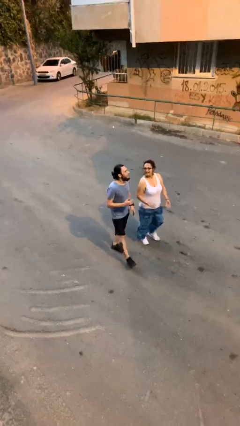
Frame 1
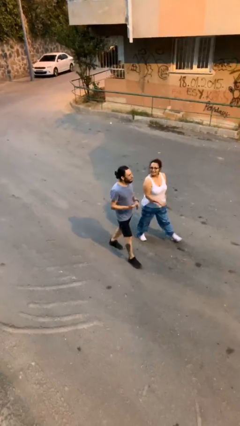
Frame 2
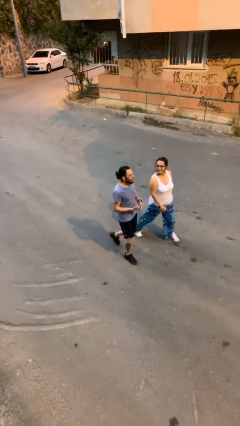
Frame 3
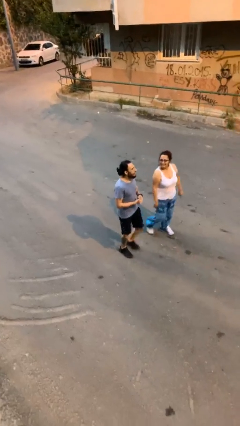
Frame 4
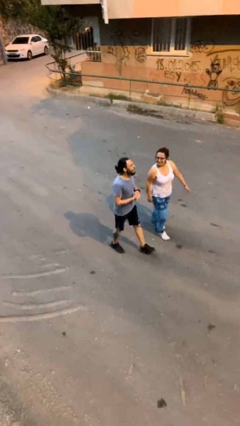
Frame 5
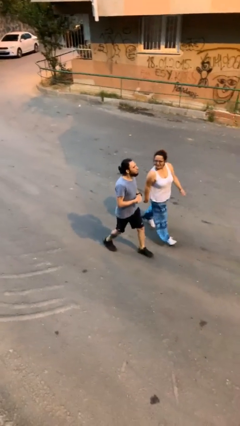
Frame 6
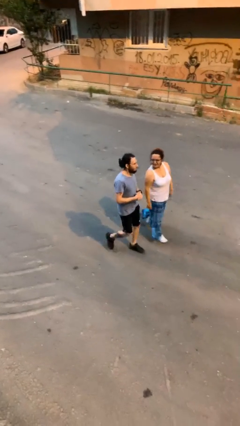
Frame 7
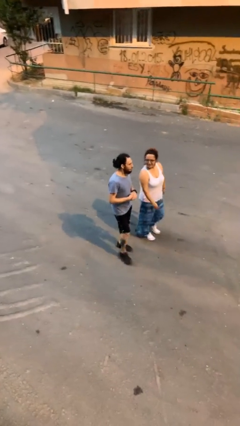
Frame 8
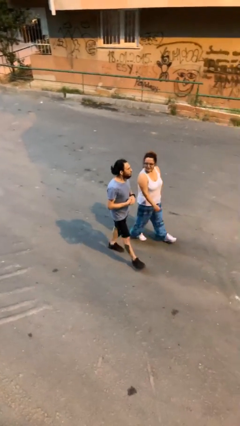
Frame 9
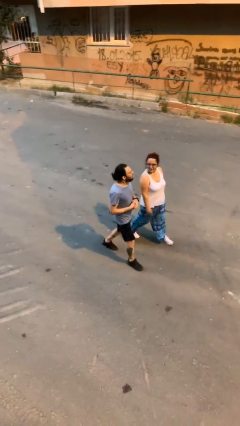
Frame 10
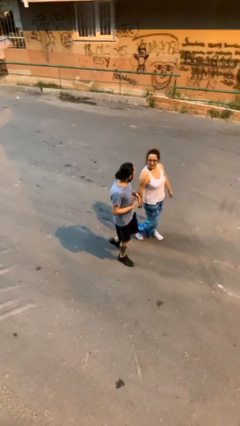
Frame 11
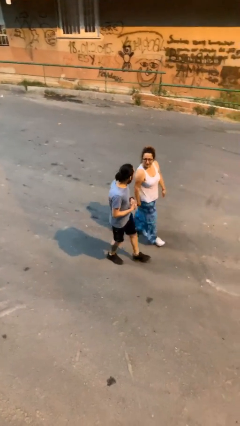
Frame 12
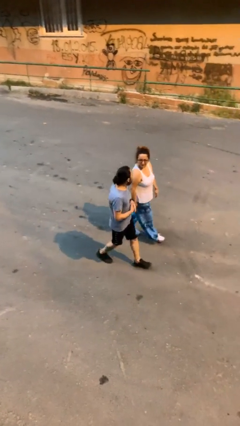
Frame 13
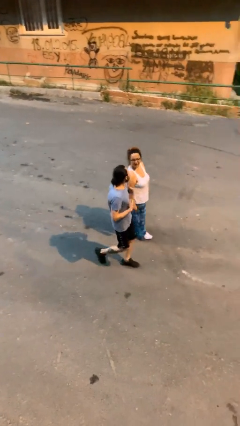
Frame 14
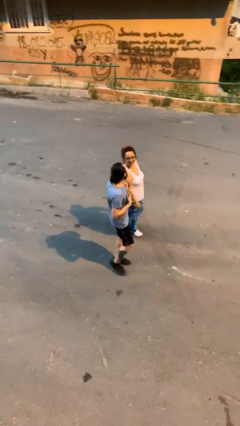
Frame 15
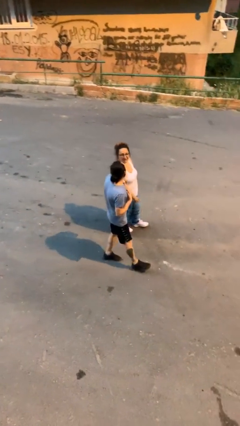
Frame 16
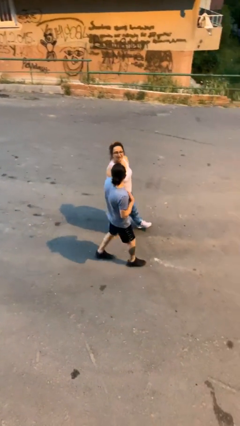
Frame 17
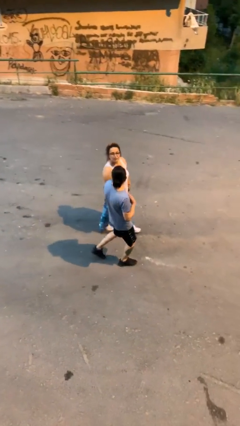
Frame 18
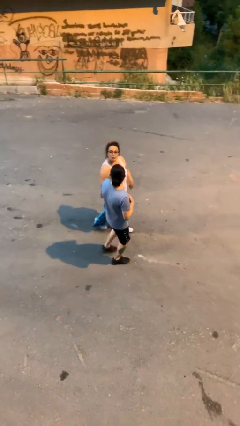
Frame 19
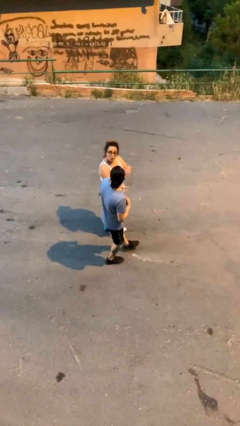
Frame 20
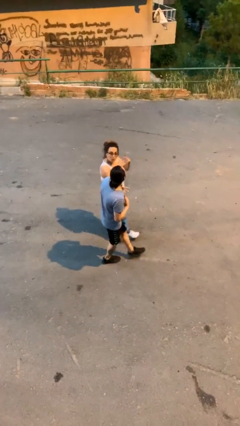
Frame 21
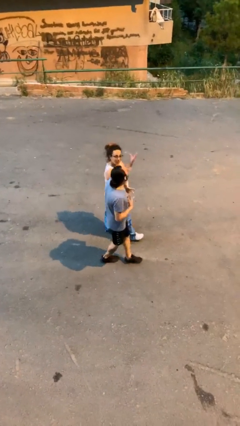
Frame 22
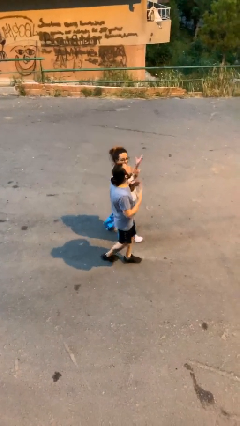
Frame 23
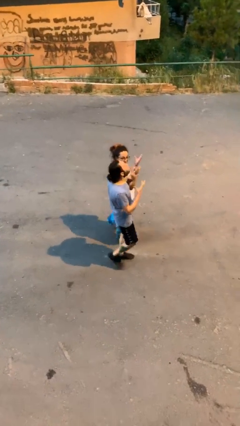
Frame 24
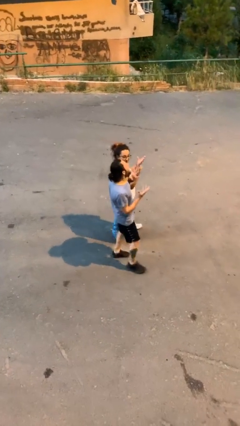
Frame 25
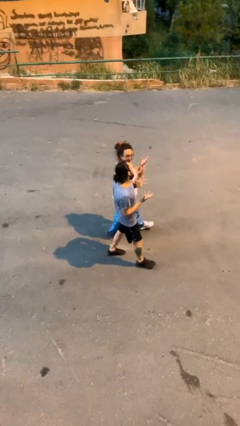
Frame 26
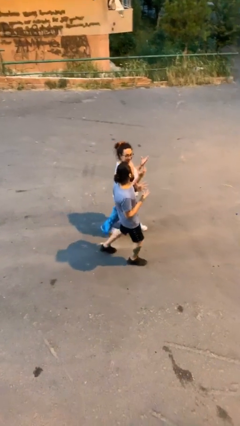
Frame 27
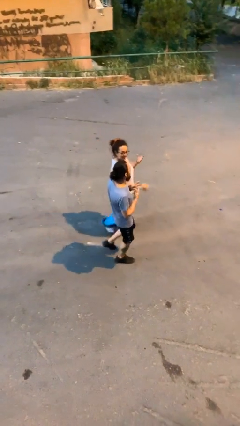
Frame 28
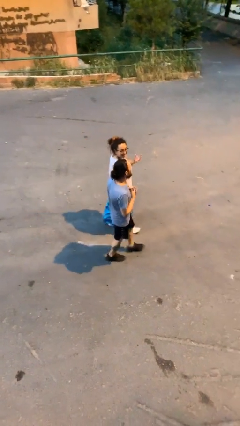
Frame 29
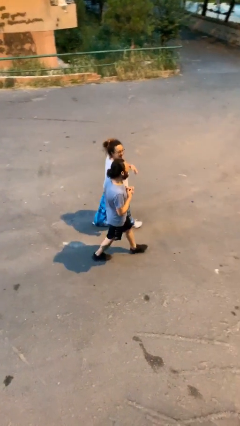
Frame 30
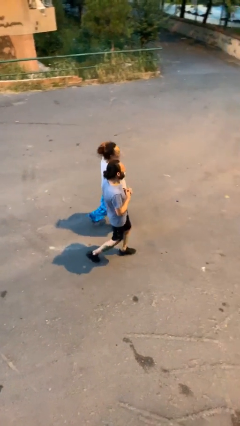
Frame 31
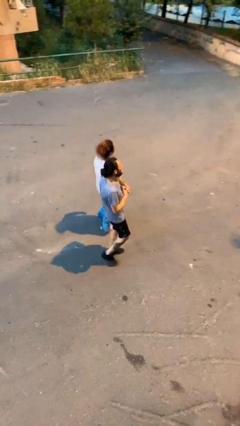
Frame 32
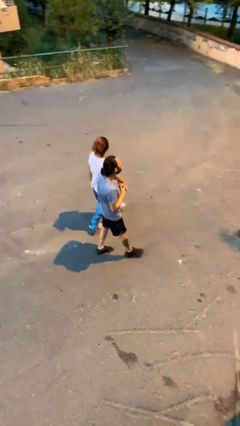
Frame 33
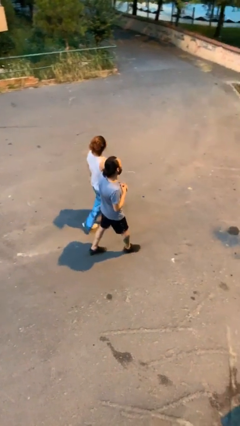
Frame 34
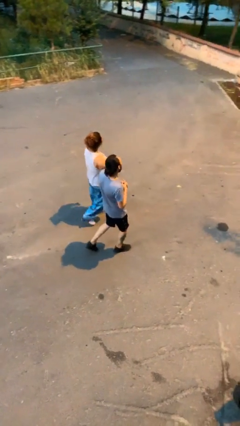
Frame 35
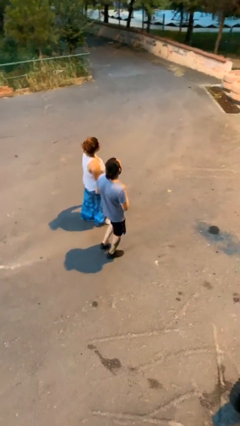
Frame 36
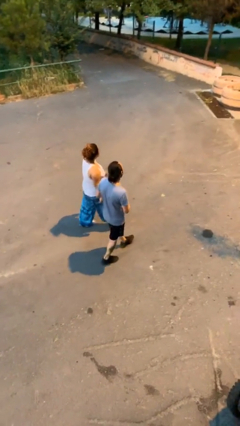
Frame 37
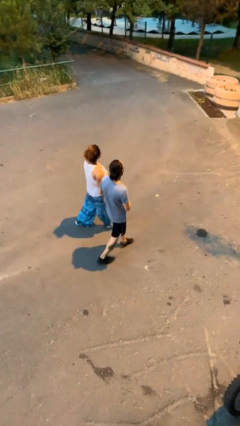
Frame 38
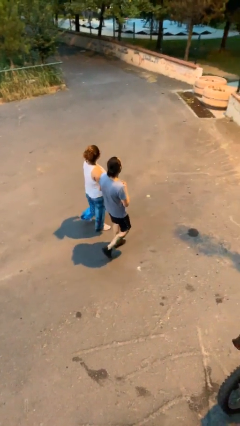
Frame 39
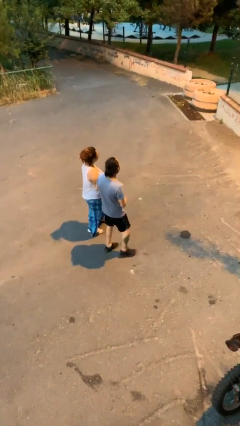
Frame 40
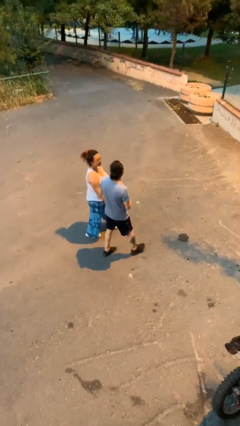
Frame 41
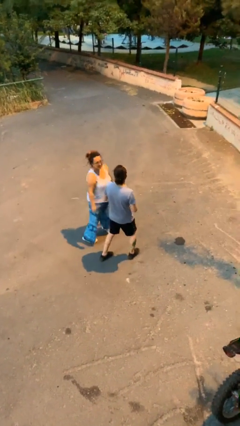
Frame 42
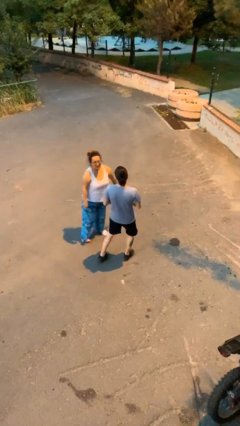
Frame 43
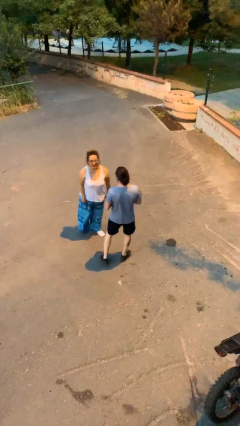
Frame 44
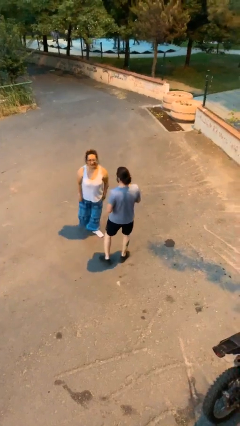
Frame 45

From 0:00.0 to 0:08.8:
person talks to person

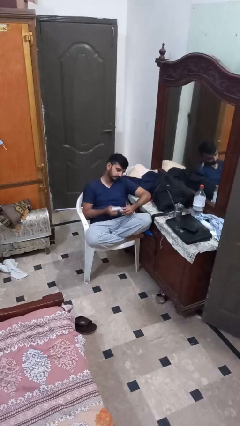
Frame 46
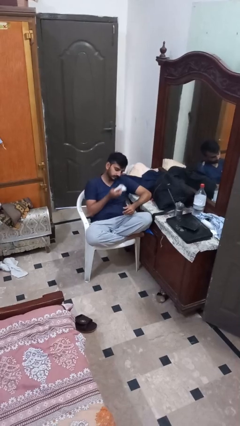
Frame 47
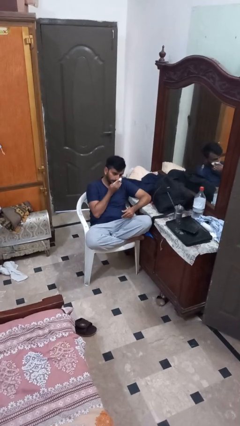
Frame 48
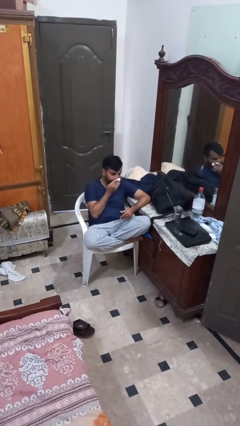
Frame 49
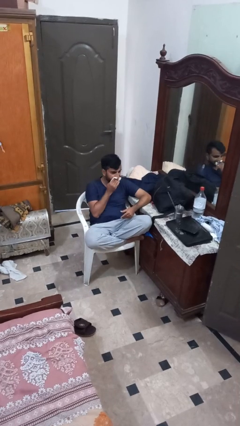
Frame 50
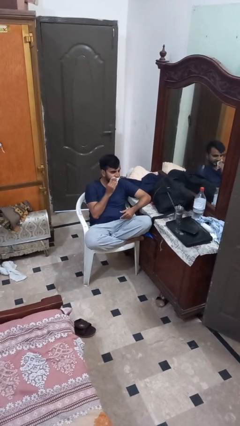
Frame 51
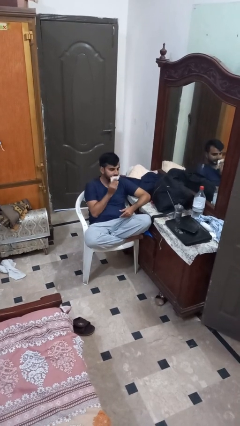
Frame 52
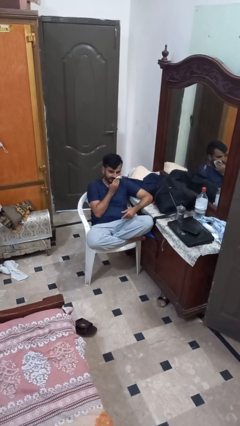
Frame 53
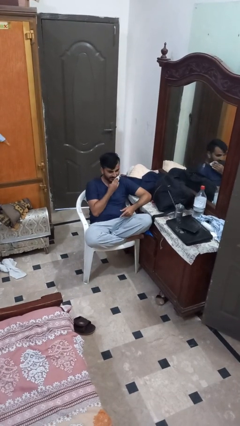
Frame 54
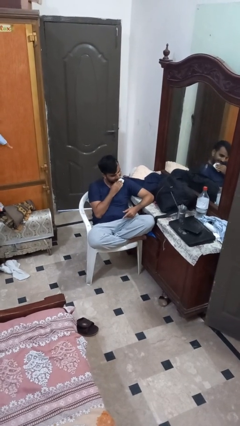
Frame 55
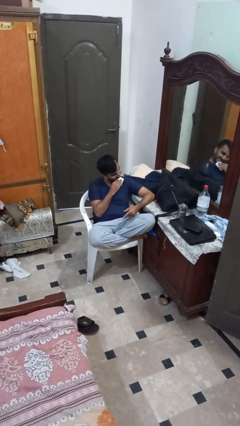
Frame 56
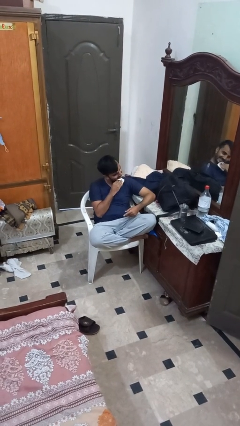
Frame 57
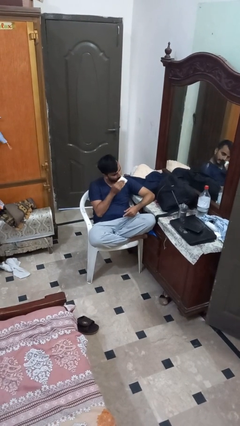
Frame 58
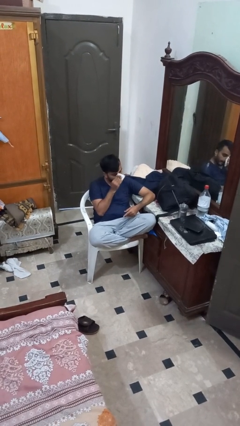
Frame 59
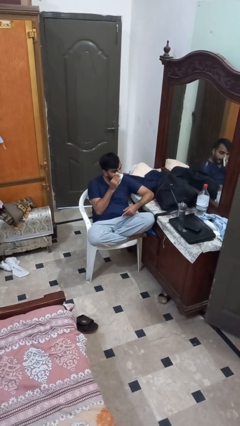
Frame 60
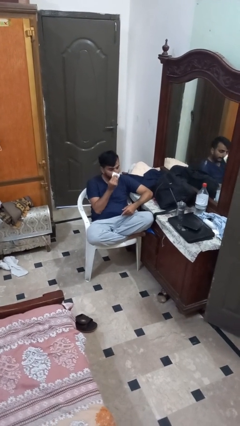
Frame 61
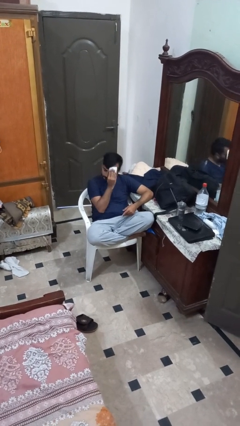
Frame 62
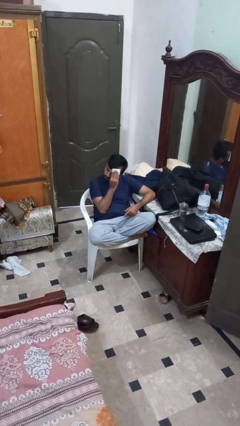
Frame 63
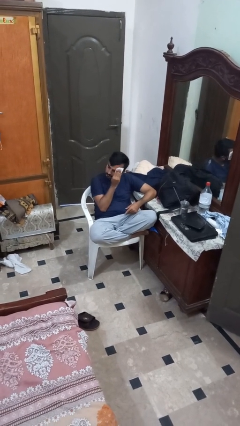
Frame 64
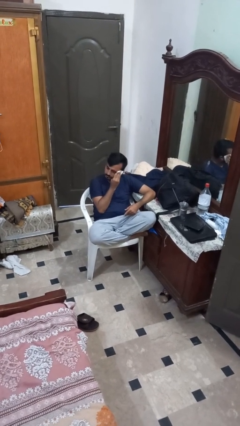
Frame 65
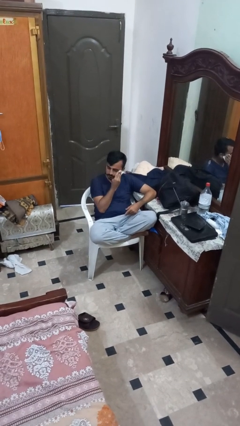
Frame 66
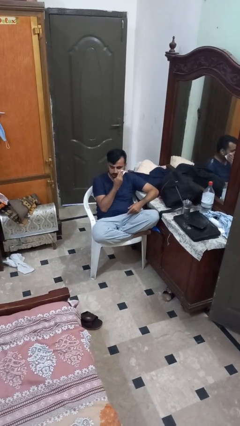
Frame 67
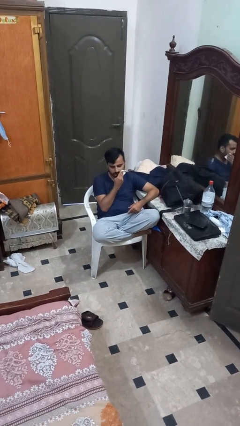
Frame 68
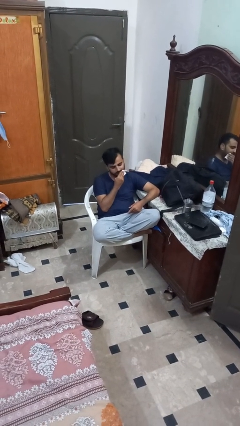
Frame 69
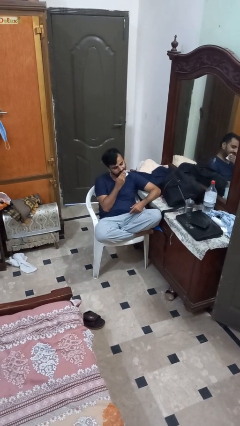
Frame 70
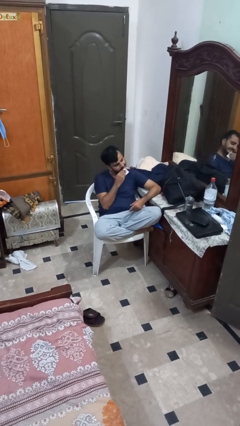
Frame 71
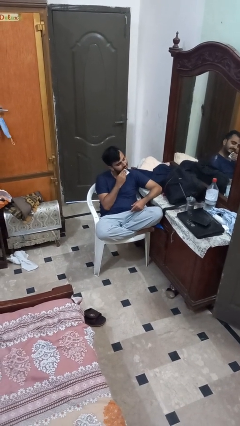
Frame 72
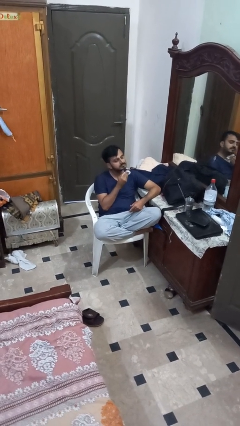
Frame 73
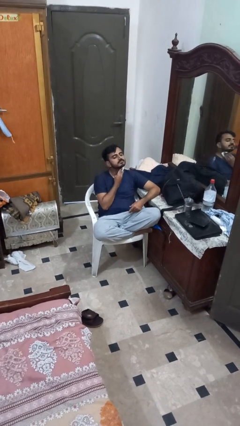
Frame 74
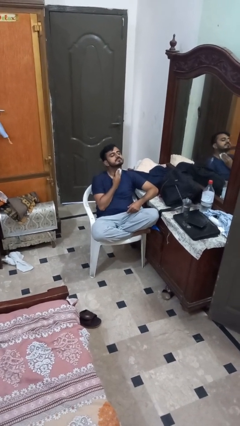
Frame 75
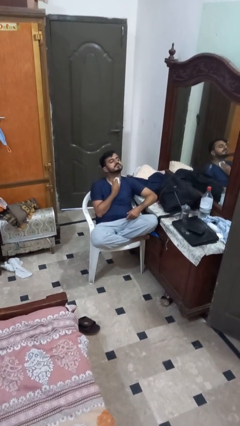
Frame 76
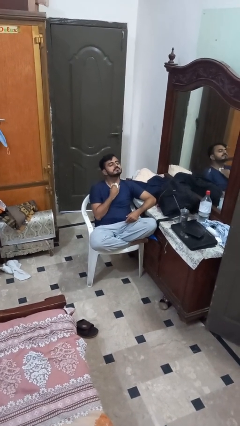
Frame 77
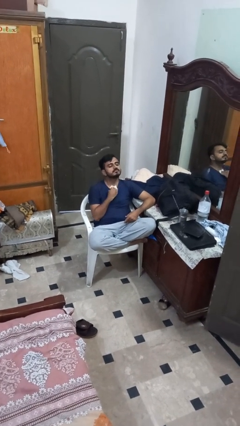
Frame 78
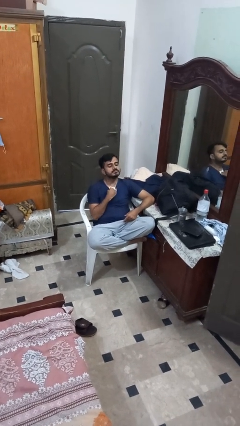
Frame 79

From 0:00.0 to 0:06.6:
person wipes mouth with napkin

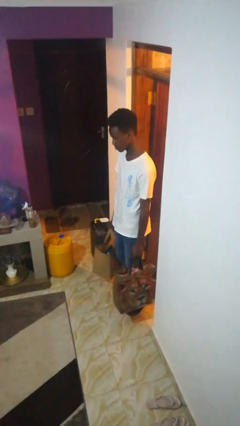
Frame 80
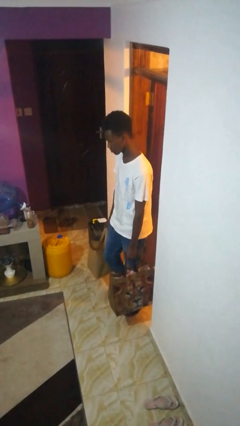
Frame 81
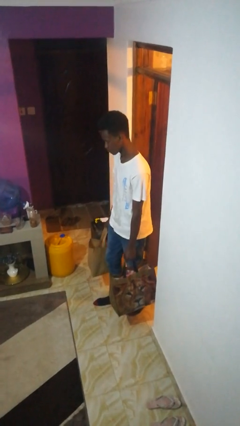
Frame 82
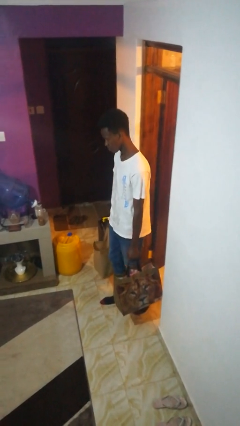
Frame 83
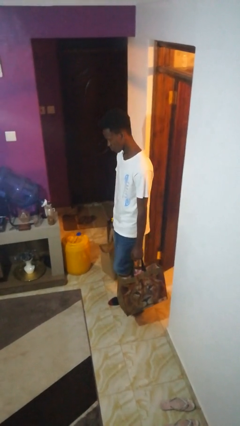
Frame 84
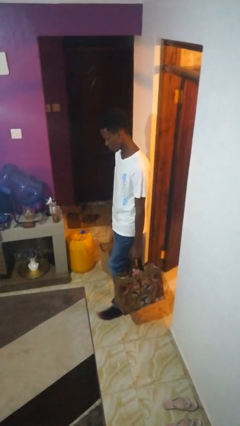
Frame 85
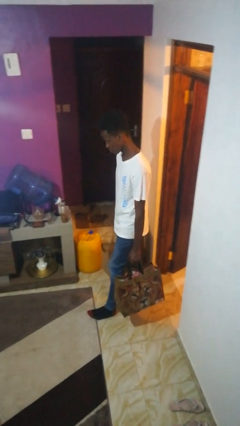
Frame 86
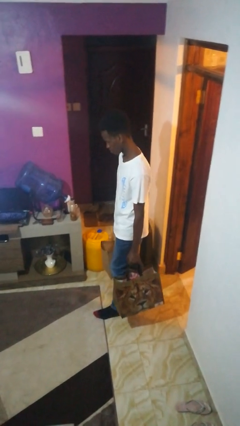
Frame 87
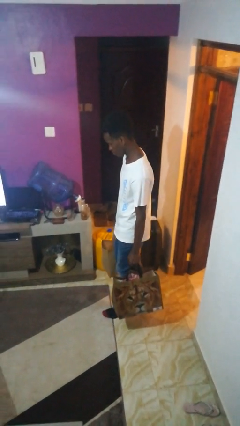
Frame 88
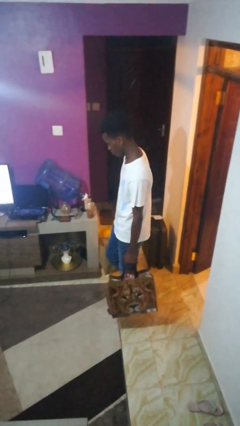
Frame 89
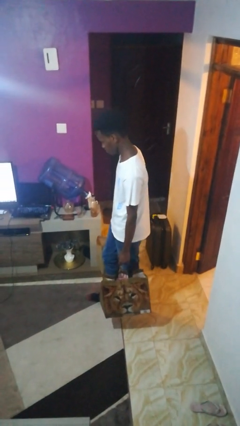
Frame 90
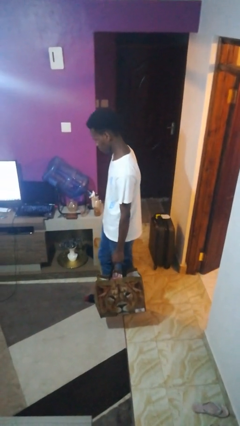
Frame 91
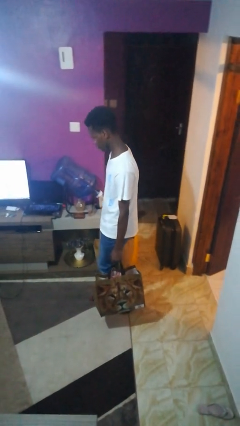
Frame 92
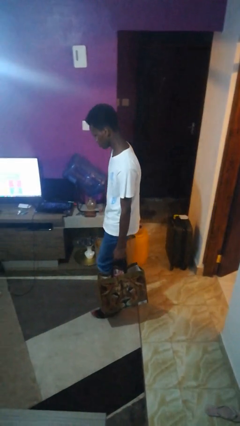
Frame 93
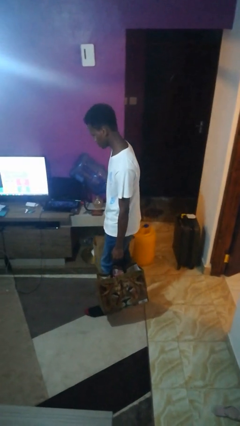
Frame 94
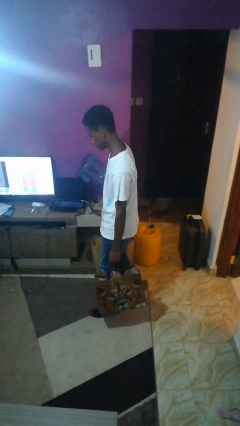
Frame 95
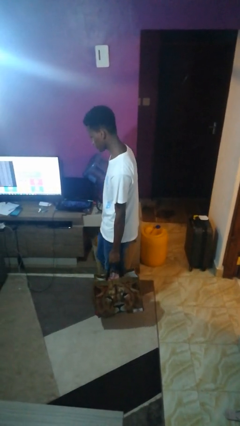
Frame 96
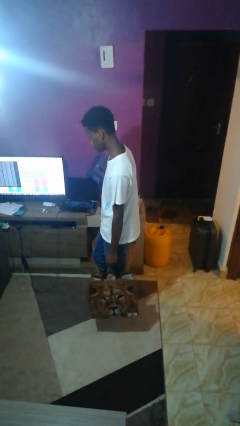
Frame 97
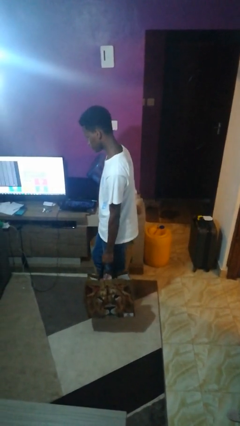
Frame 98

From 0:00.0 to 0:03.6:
person carries groceries
